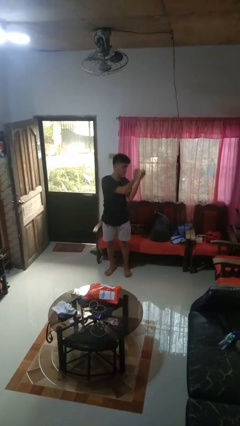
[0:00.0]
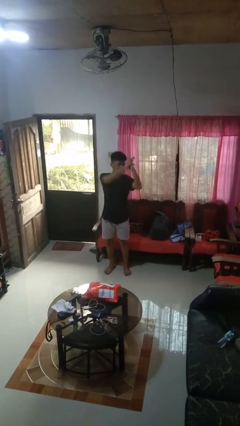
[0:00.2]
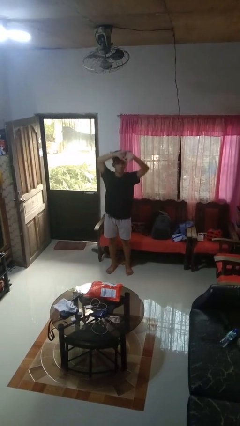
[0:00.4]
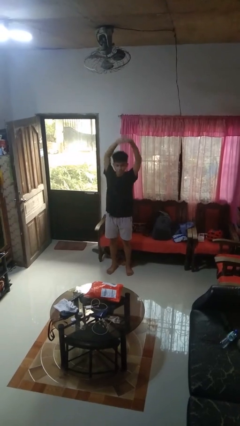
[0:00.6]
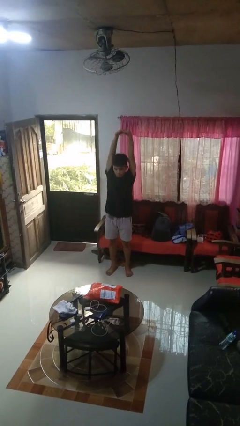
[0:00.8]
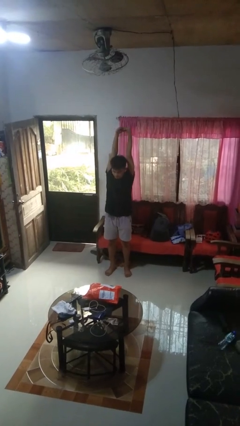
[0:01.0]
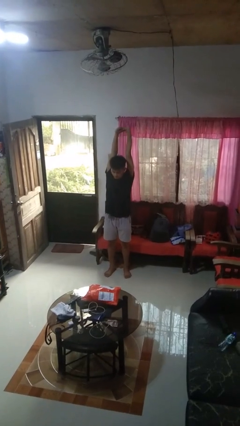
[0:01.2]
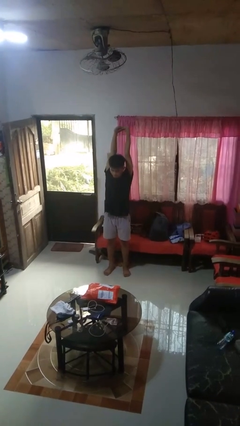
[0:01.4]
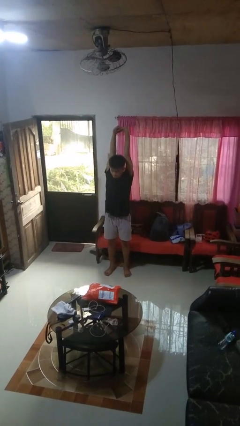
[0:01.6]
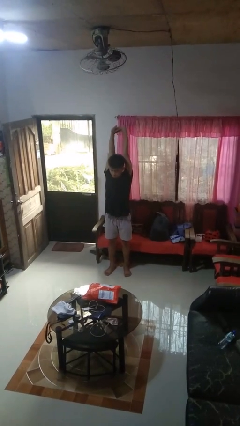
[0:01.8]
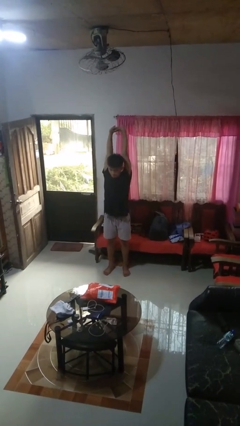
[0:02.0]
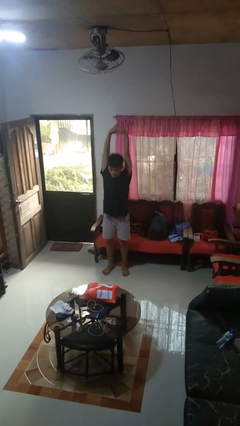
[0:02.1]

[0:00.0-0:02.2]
person stretches arms over head

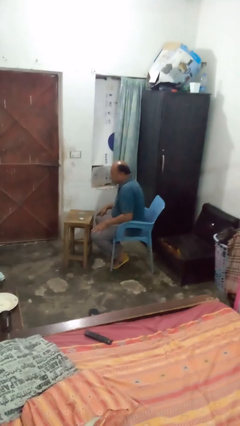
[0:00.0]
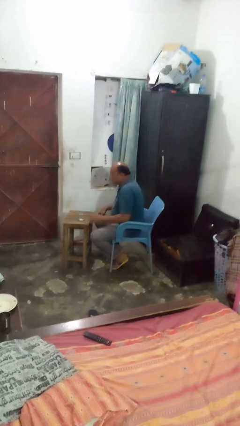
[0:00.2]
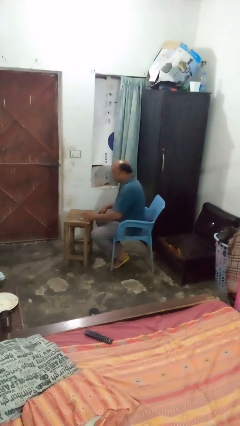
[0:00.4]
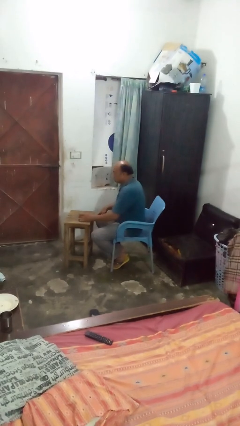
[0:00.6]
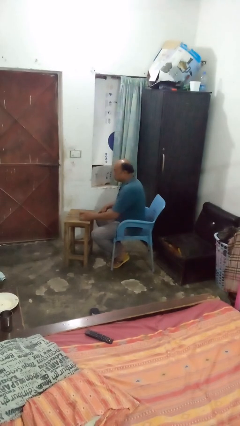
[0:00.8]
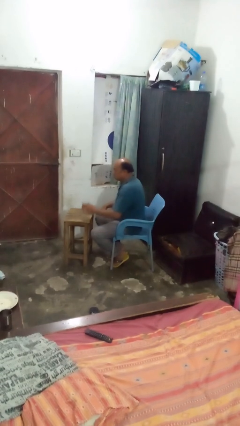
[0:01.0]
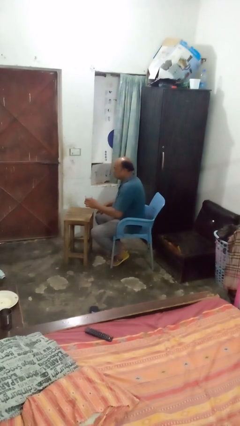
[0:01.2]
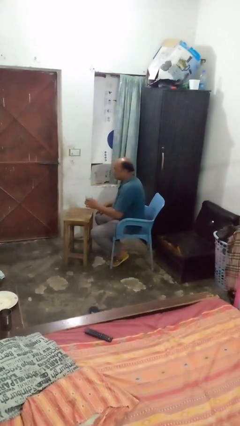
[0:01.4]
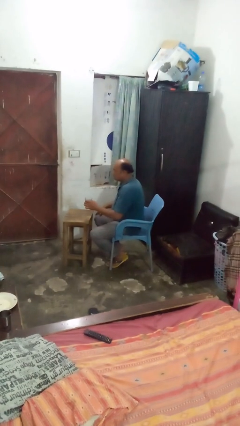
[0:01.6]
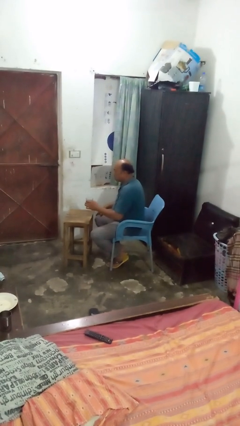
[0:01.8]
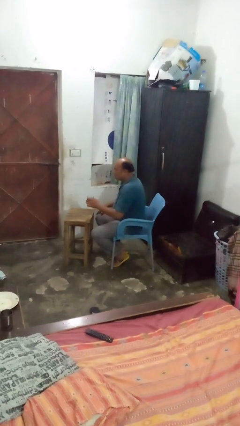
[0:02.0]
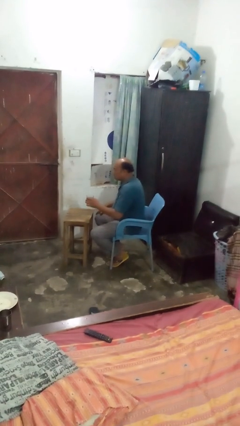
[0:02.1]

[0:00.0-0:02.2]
person picks up object from table

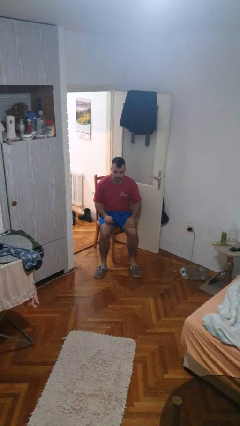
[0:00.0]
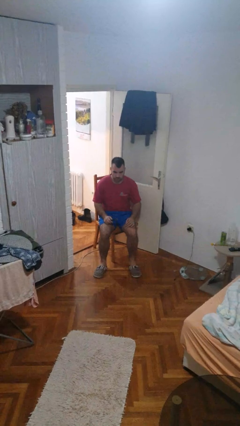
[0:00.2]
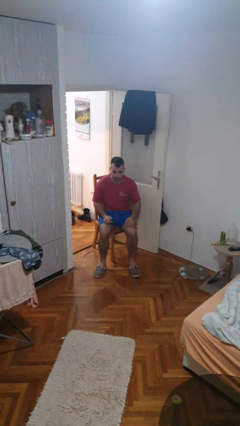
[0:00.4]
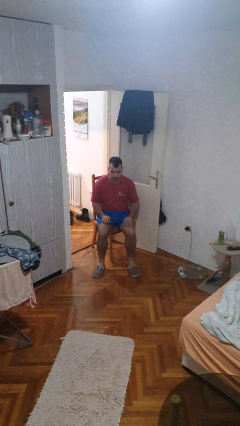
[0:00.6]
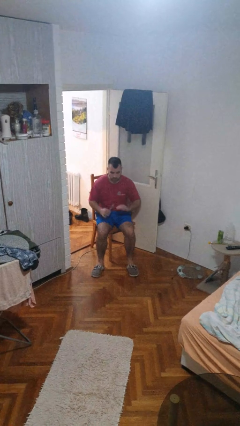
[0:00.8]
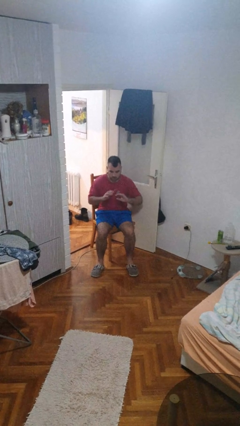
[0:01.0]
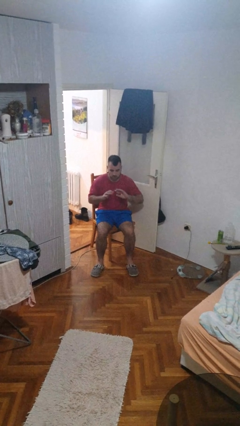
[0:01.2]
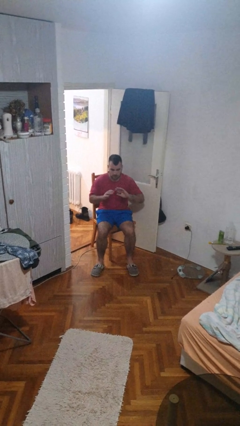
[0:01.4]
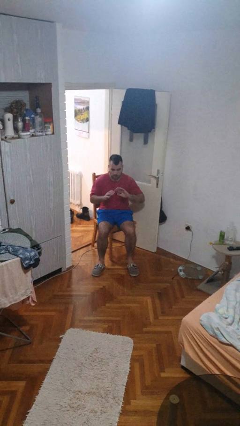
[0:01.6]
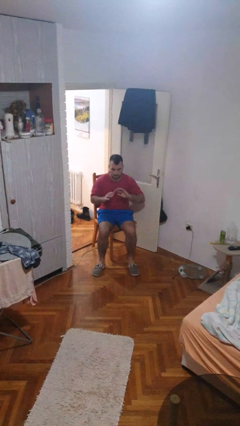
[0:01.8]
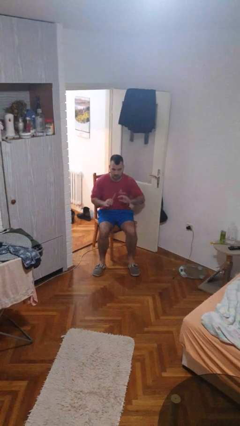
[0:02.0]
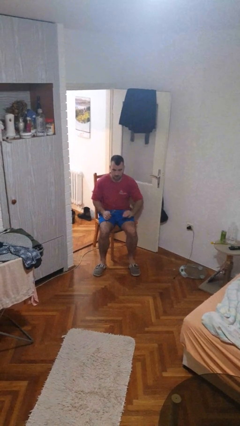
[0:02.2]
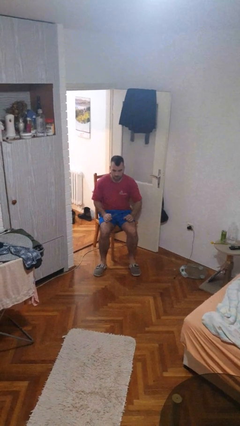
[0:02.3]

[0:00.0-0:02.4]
person files fingernails

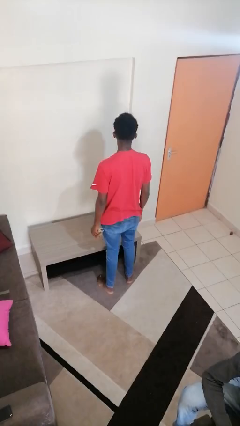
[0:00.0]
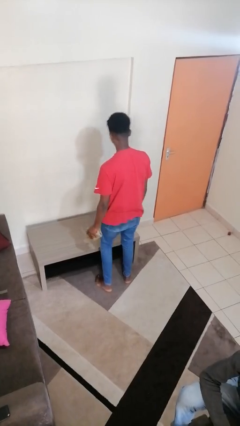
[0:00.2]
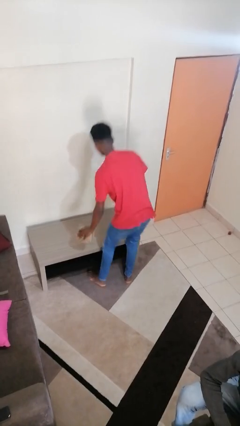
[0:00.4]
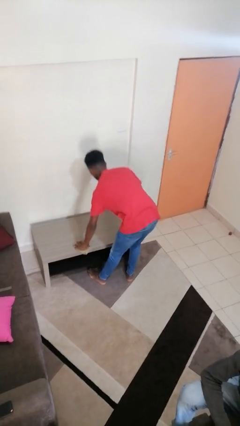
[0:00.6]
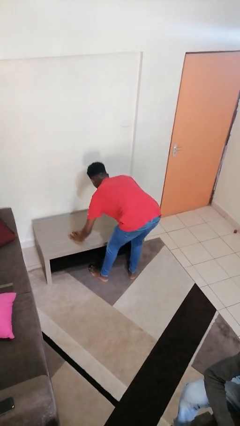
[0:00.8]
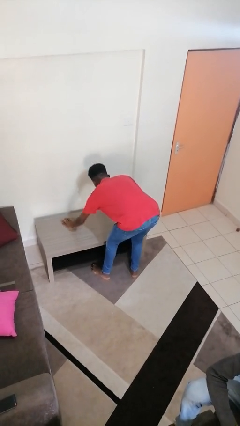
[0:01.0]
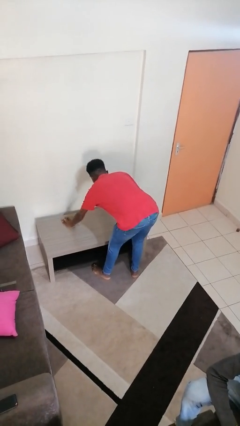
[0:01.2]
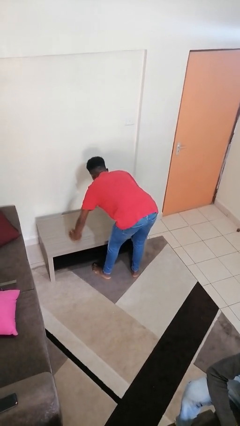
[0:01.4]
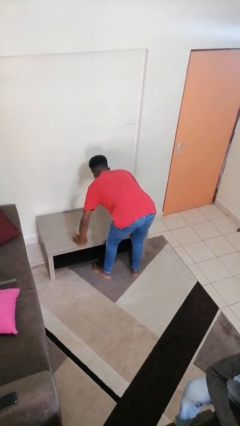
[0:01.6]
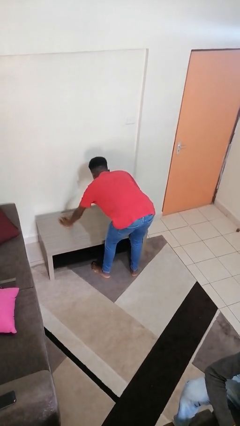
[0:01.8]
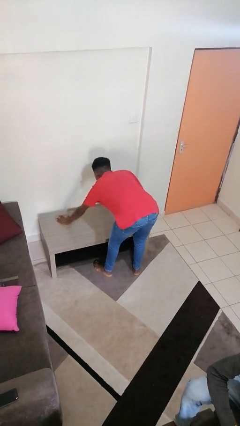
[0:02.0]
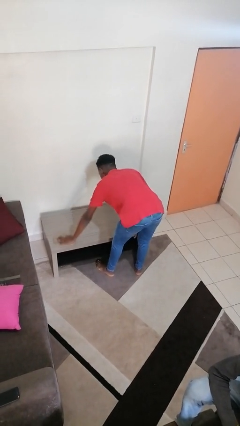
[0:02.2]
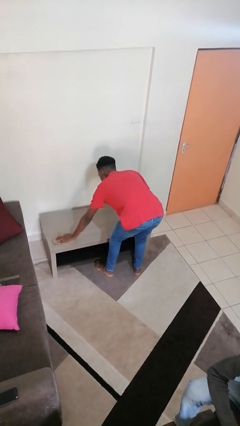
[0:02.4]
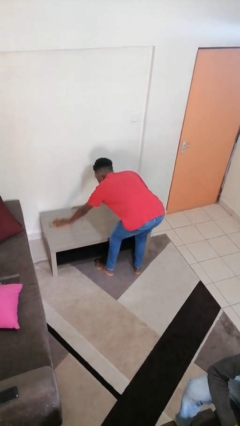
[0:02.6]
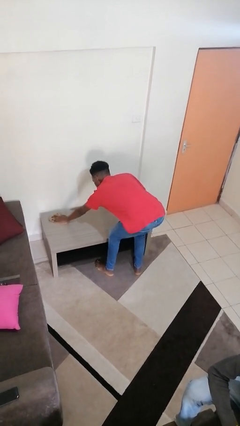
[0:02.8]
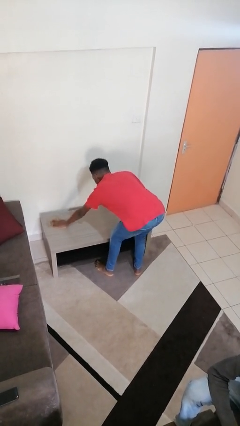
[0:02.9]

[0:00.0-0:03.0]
person cleans table with rag

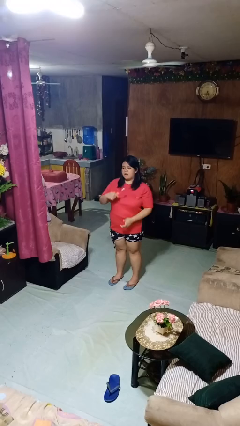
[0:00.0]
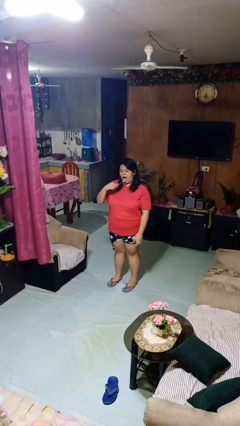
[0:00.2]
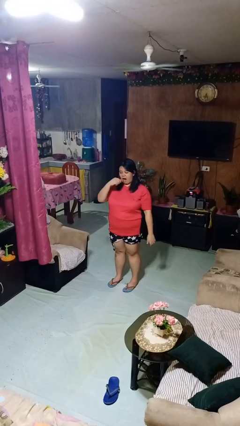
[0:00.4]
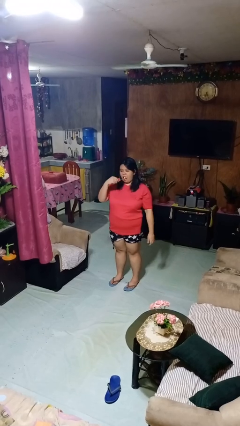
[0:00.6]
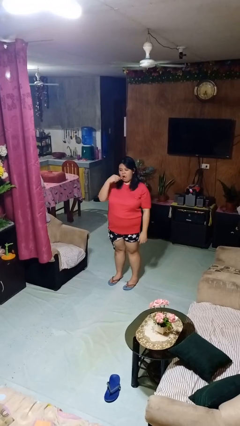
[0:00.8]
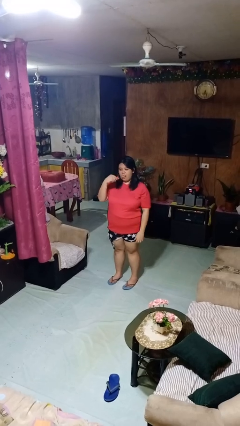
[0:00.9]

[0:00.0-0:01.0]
person brushes teeth

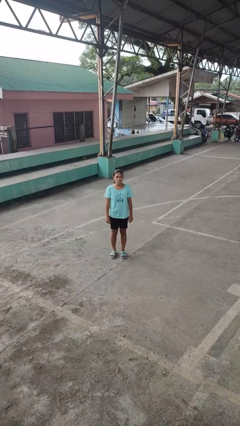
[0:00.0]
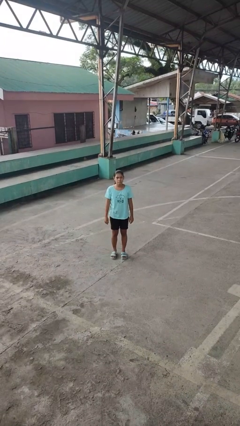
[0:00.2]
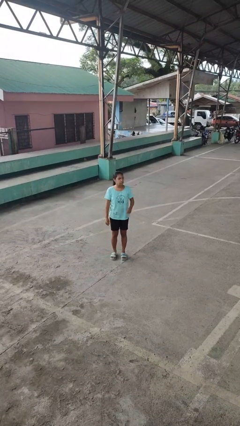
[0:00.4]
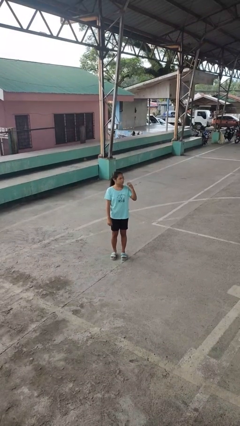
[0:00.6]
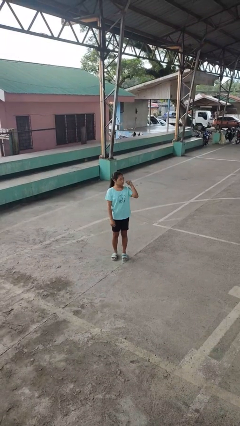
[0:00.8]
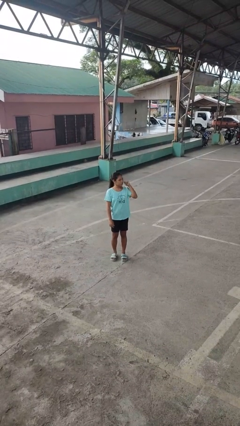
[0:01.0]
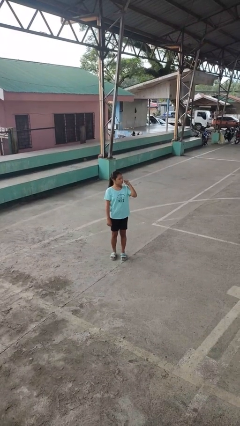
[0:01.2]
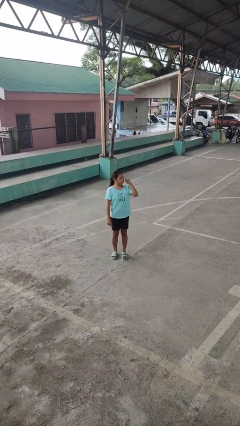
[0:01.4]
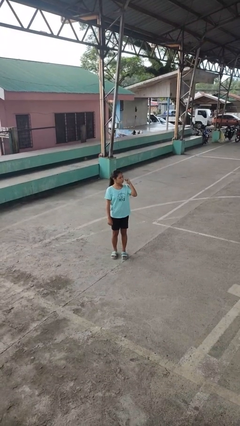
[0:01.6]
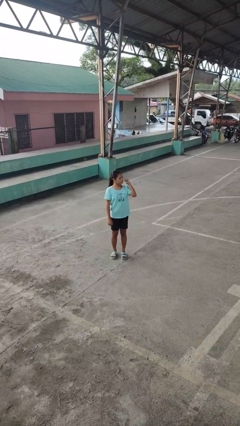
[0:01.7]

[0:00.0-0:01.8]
person gestures behind me

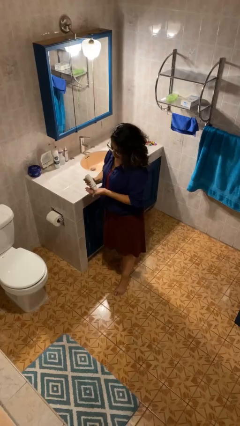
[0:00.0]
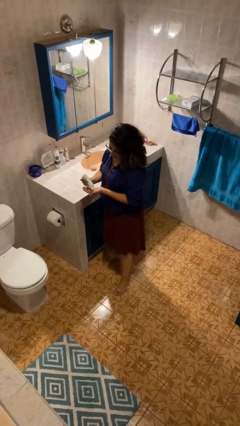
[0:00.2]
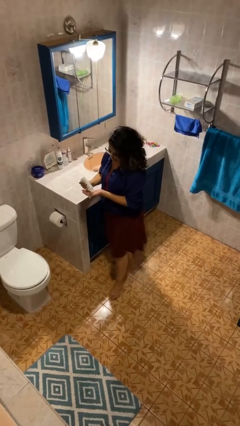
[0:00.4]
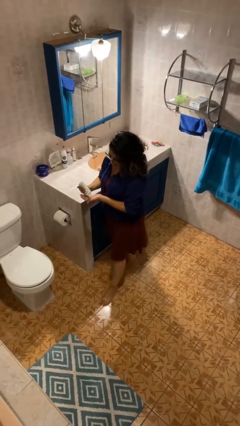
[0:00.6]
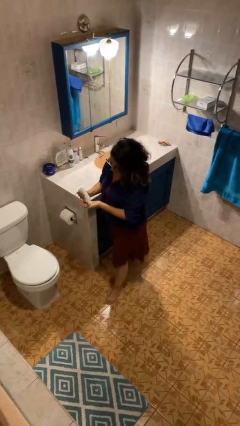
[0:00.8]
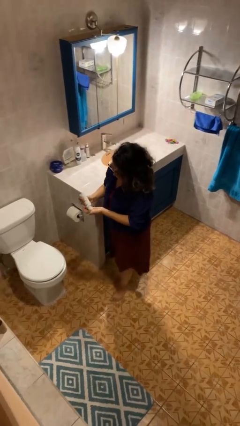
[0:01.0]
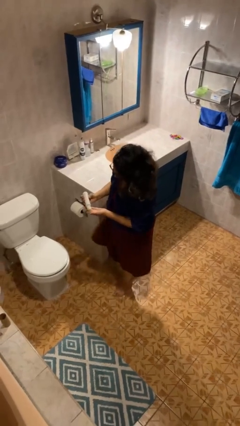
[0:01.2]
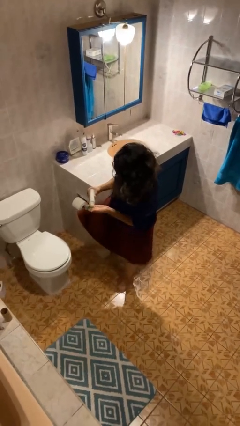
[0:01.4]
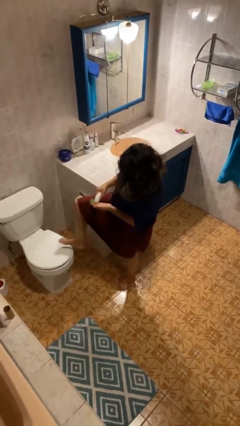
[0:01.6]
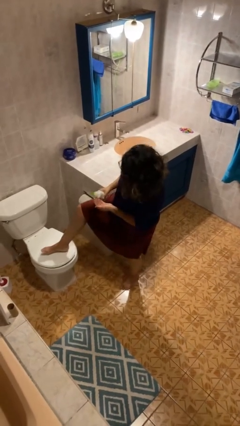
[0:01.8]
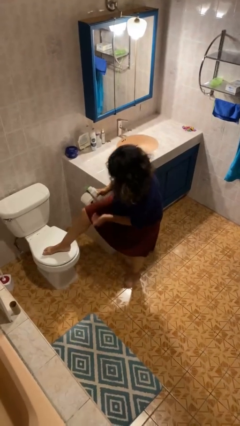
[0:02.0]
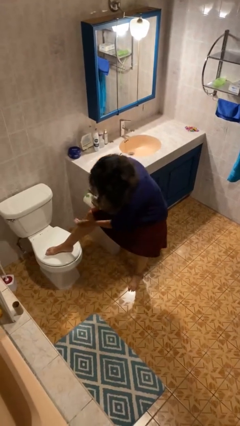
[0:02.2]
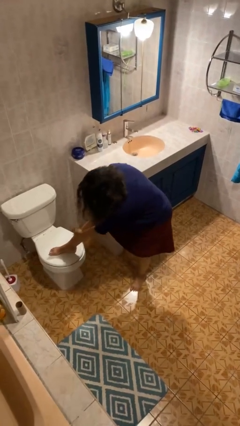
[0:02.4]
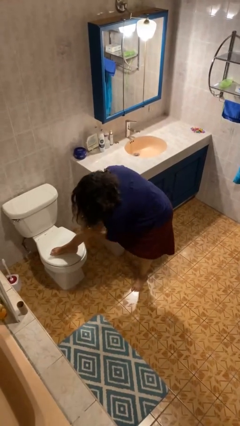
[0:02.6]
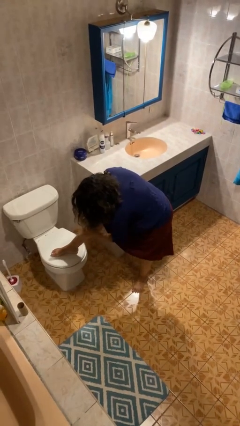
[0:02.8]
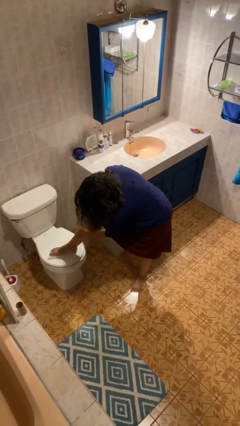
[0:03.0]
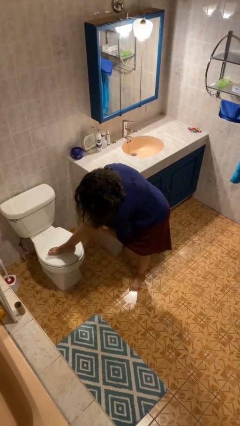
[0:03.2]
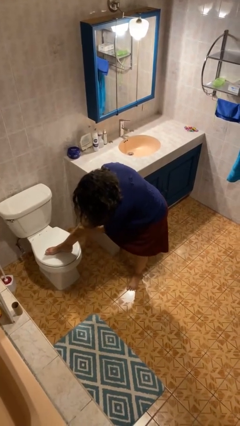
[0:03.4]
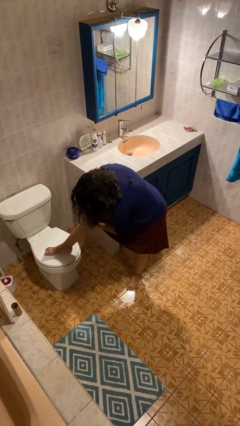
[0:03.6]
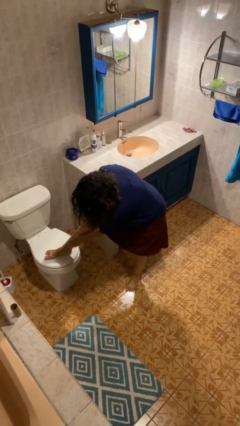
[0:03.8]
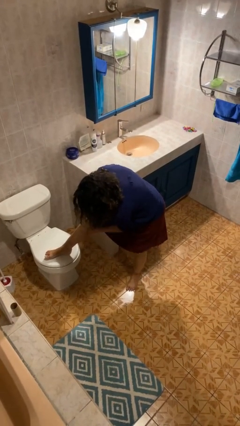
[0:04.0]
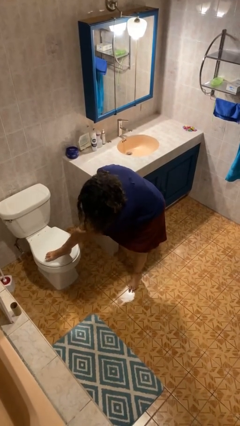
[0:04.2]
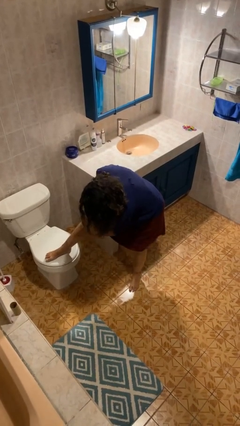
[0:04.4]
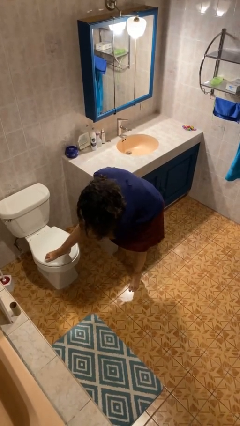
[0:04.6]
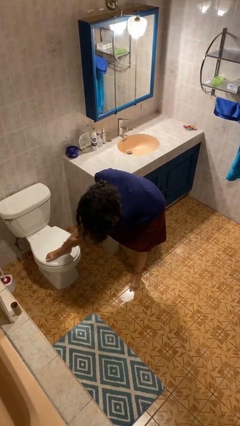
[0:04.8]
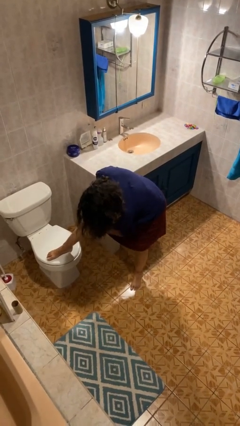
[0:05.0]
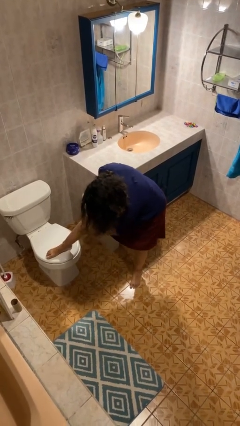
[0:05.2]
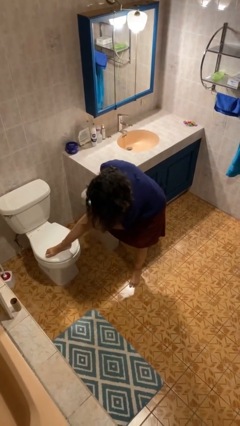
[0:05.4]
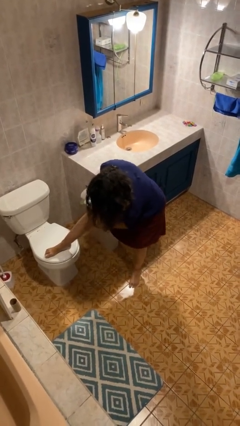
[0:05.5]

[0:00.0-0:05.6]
person applies sunscreen
